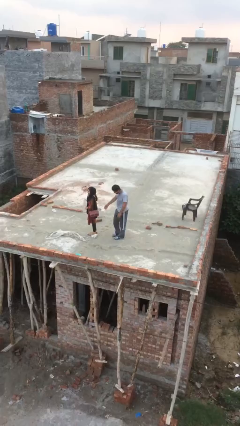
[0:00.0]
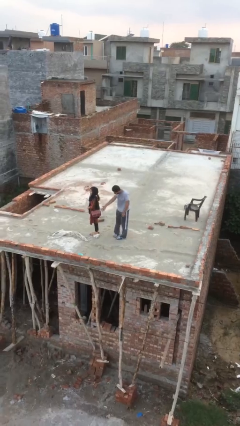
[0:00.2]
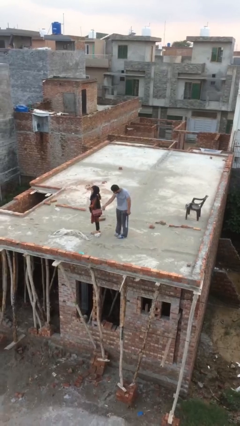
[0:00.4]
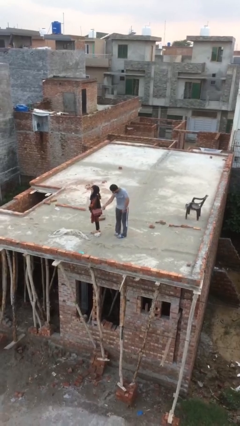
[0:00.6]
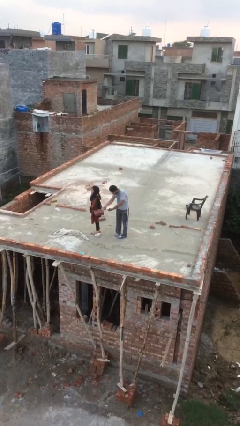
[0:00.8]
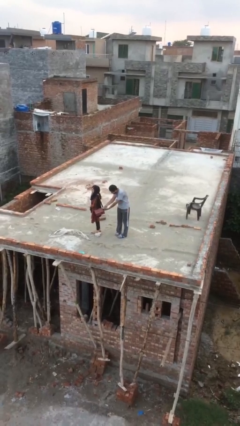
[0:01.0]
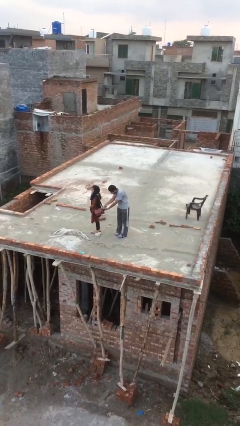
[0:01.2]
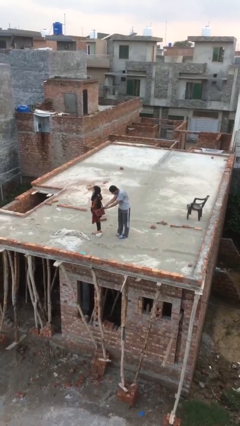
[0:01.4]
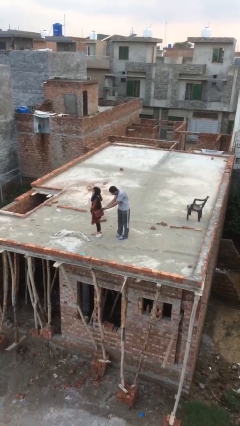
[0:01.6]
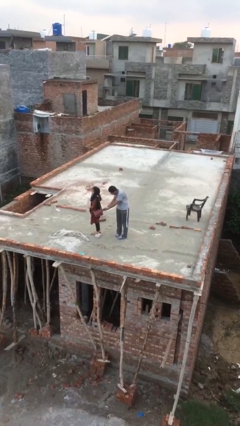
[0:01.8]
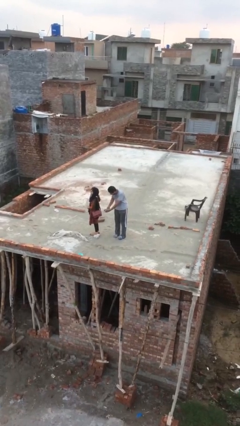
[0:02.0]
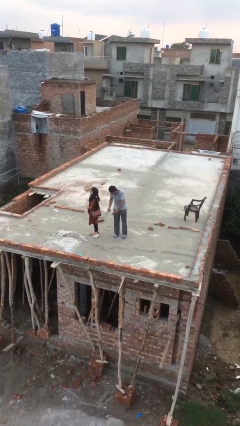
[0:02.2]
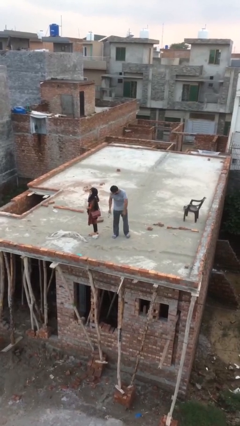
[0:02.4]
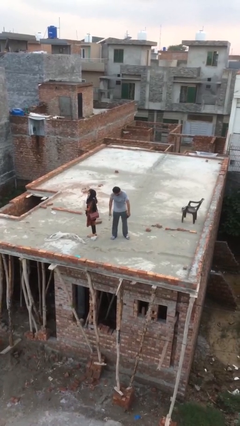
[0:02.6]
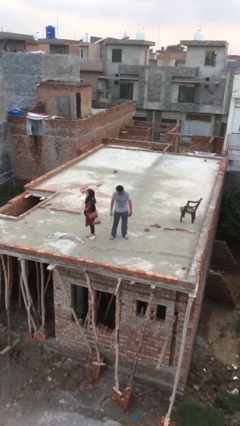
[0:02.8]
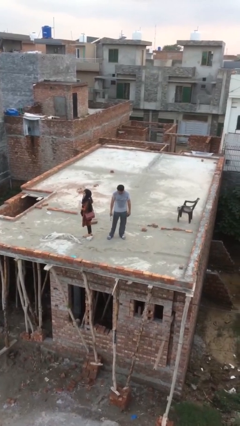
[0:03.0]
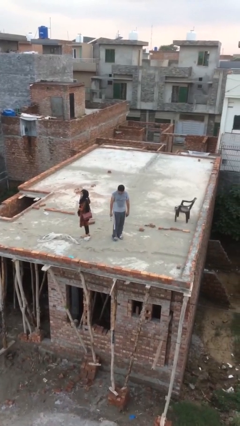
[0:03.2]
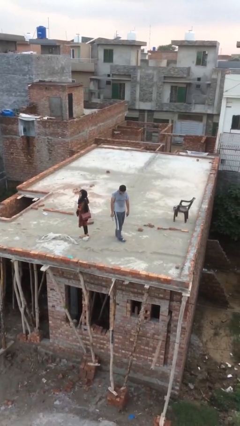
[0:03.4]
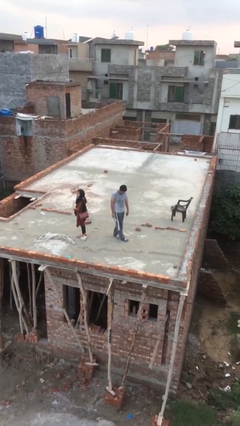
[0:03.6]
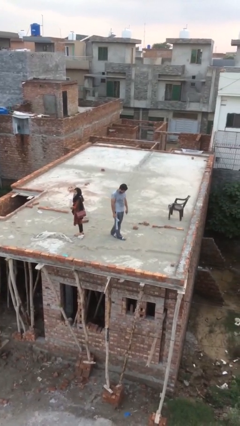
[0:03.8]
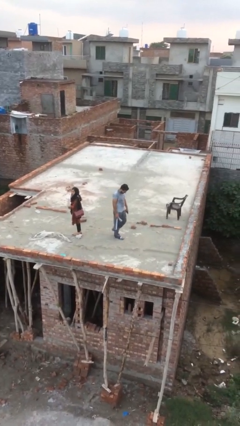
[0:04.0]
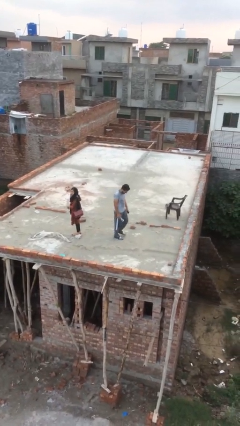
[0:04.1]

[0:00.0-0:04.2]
person steals object from person

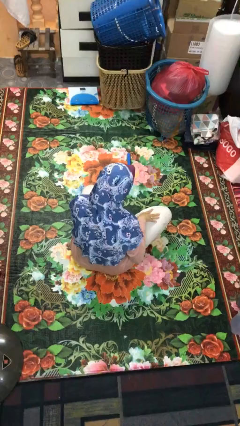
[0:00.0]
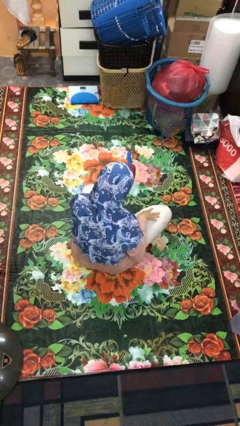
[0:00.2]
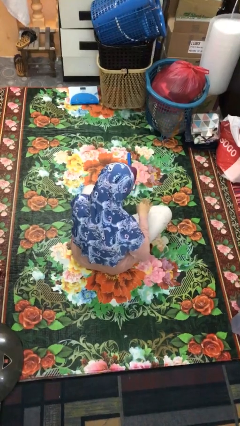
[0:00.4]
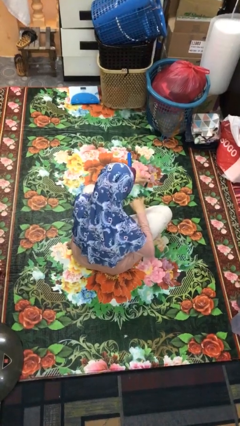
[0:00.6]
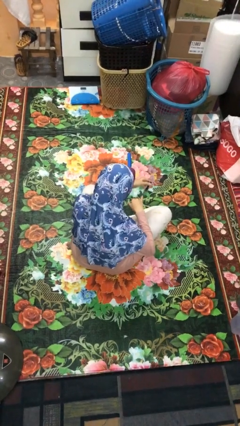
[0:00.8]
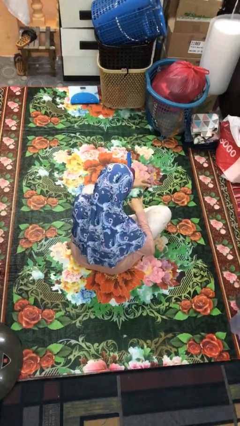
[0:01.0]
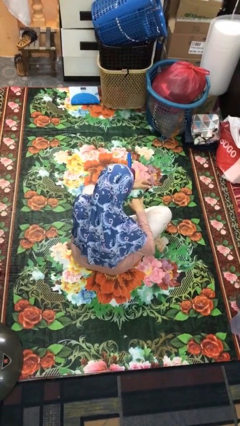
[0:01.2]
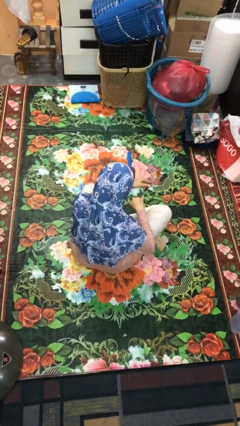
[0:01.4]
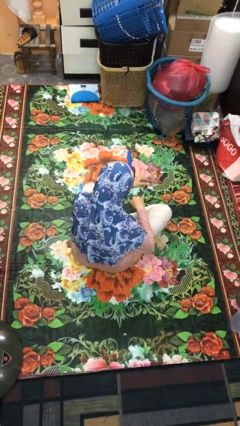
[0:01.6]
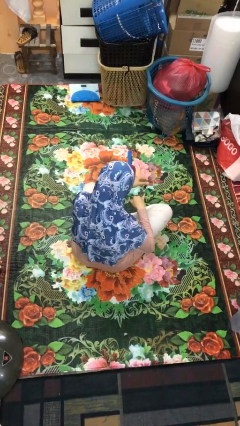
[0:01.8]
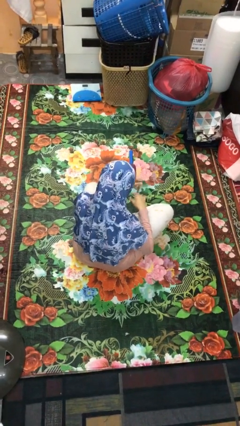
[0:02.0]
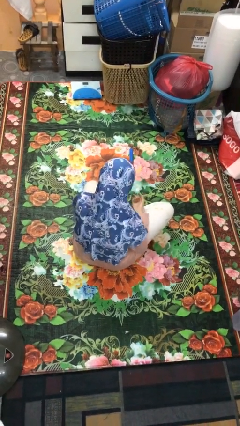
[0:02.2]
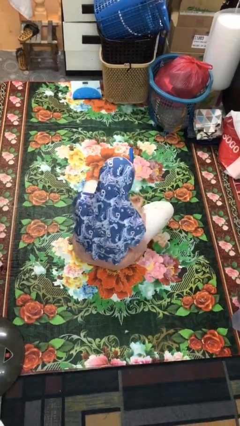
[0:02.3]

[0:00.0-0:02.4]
person clips fingernails

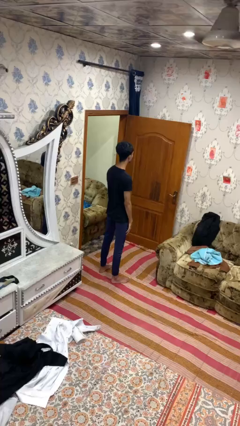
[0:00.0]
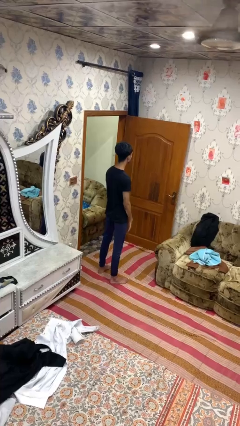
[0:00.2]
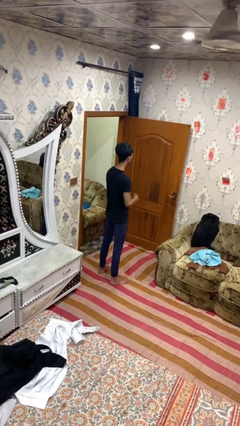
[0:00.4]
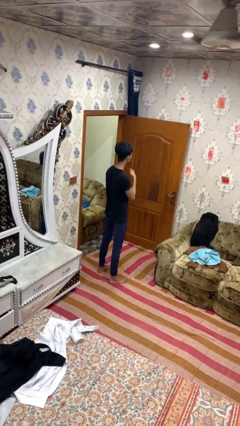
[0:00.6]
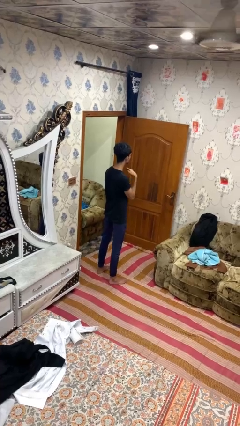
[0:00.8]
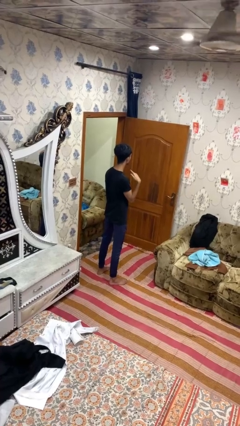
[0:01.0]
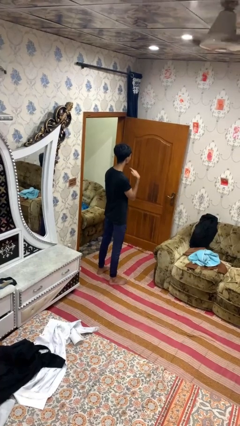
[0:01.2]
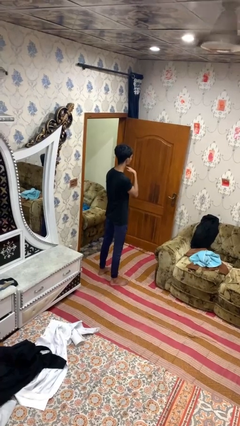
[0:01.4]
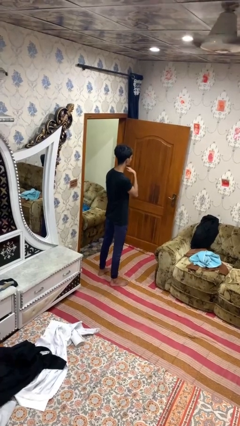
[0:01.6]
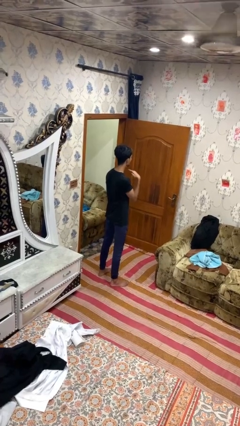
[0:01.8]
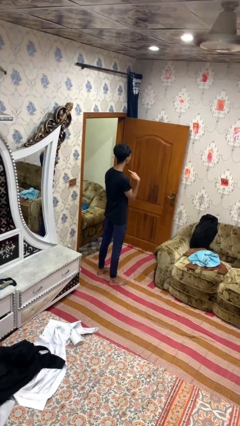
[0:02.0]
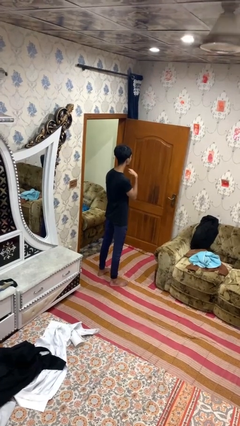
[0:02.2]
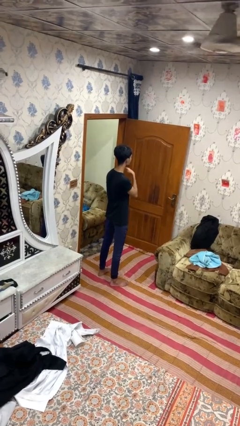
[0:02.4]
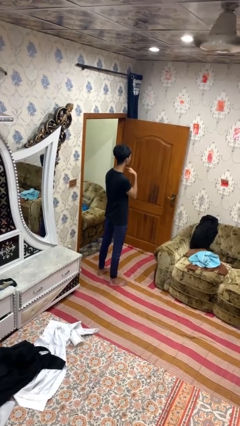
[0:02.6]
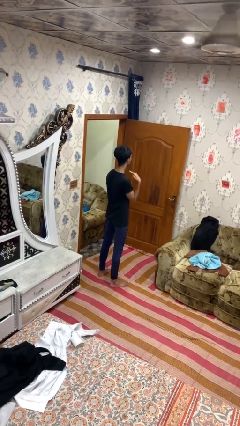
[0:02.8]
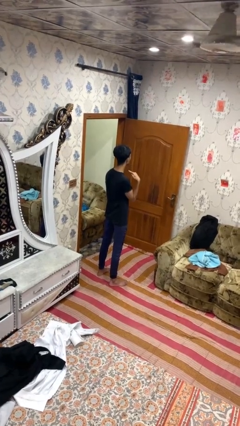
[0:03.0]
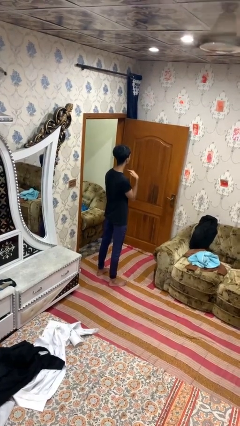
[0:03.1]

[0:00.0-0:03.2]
person gestures cut

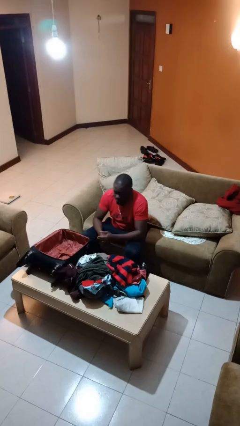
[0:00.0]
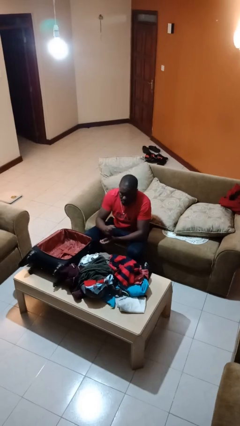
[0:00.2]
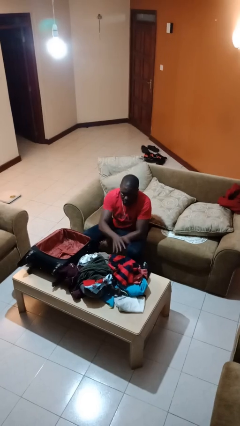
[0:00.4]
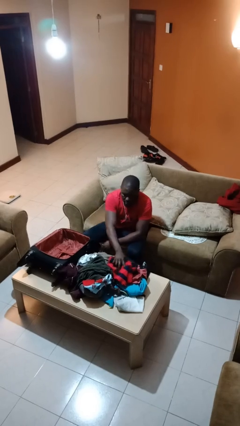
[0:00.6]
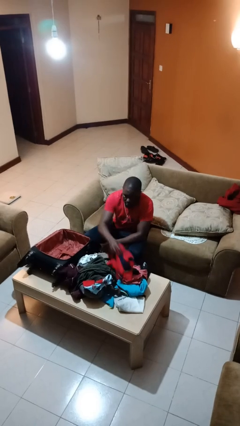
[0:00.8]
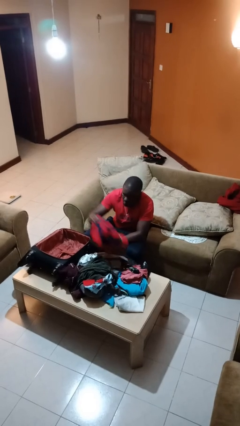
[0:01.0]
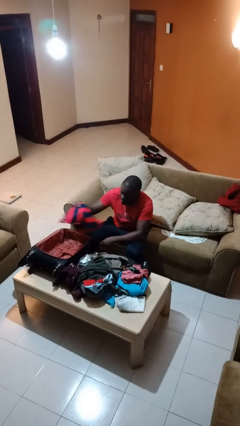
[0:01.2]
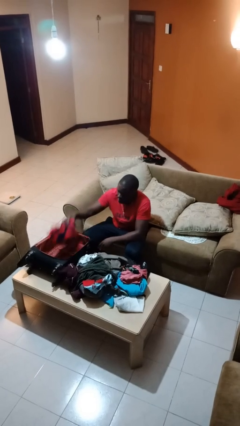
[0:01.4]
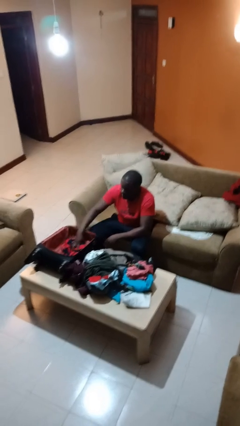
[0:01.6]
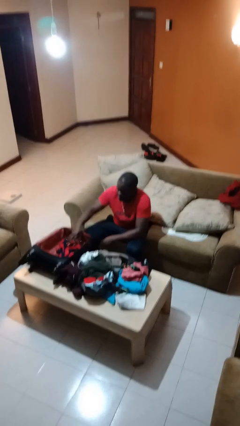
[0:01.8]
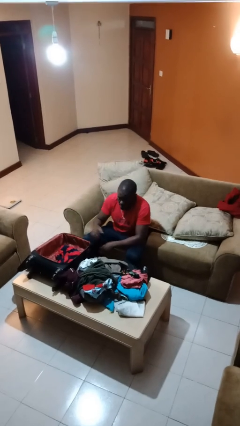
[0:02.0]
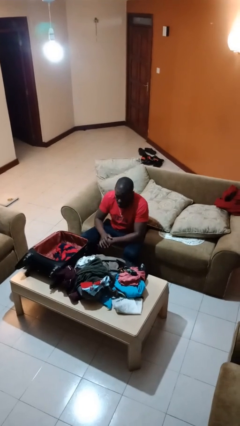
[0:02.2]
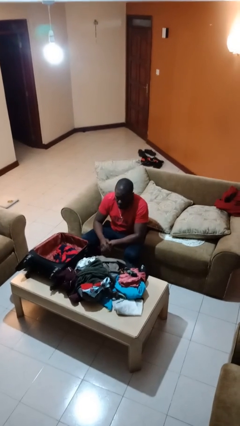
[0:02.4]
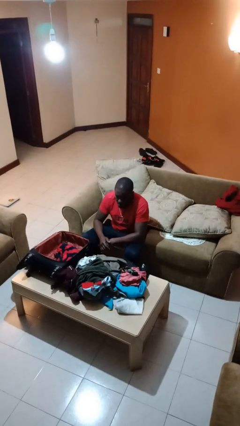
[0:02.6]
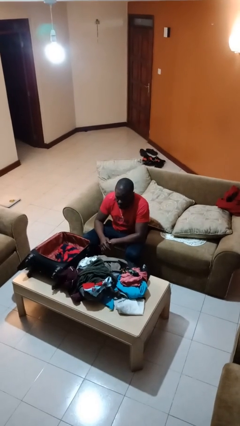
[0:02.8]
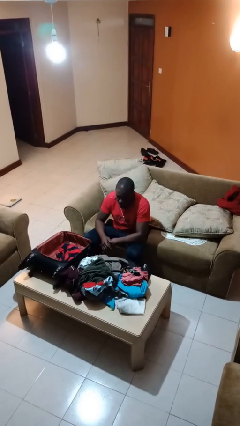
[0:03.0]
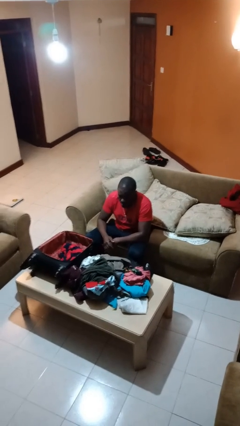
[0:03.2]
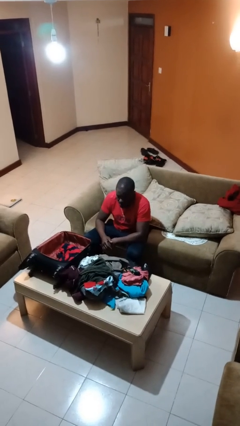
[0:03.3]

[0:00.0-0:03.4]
person loads clothes into suitcase

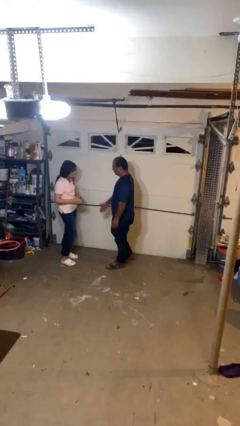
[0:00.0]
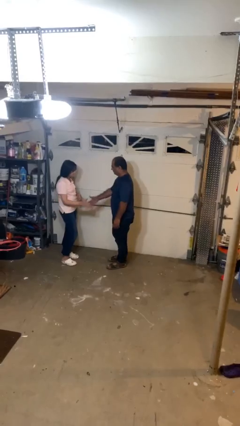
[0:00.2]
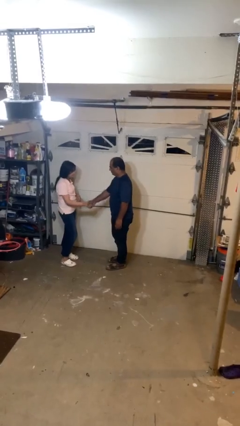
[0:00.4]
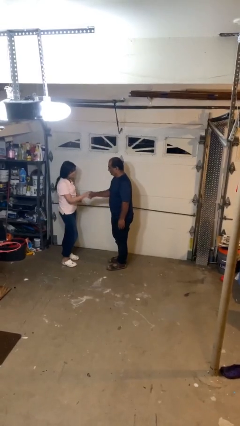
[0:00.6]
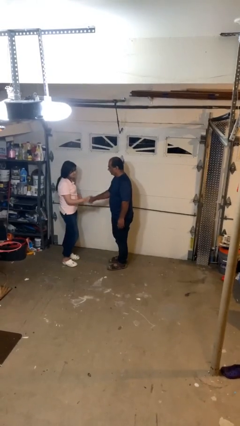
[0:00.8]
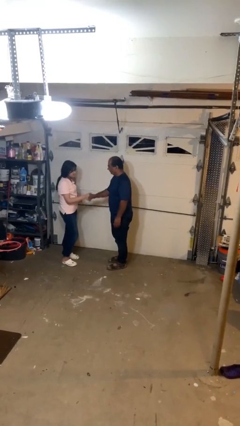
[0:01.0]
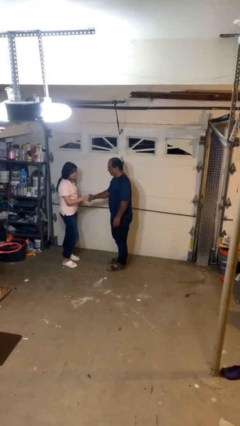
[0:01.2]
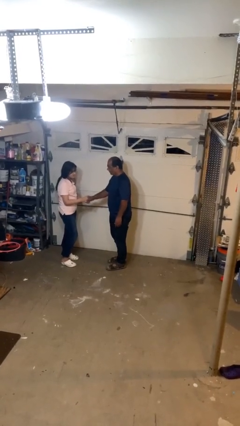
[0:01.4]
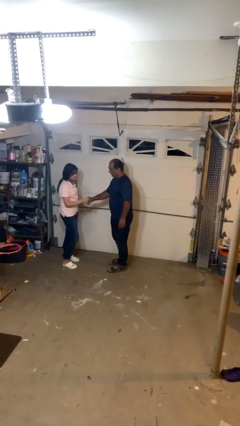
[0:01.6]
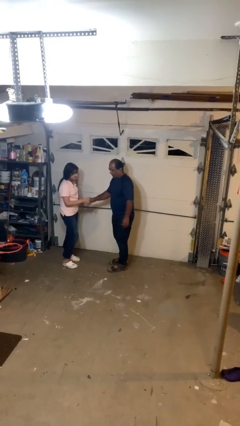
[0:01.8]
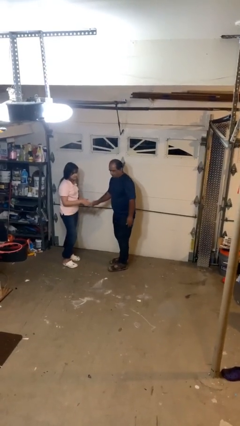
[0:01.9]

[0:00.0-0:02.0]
person shakes hand

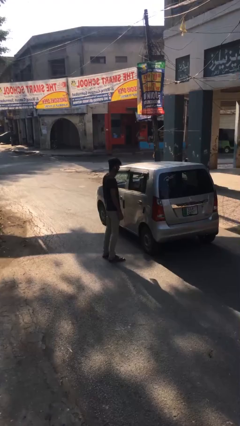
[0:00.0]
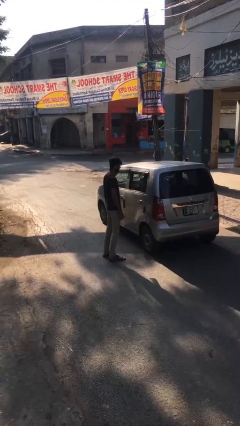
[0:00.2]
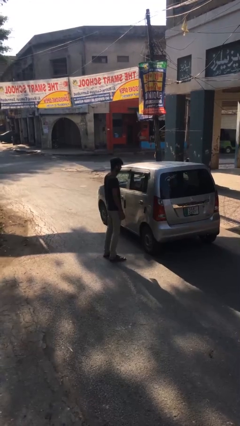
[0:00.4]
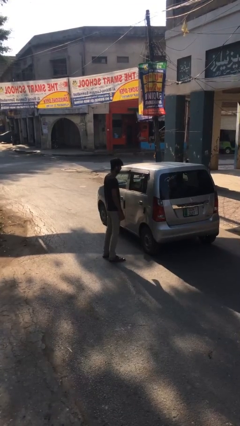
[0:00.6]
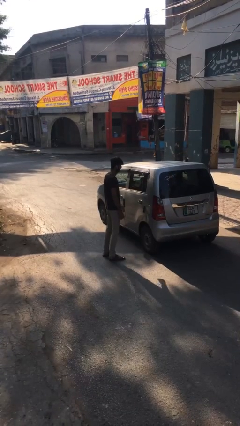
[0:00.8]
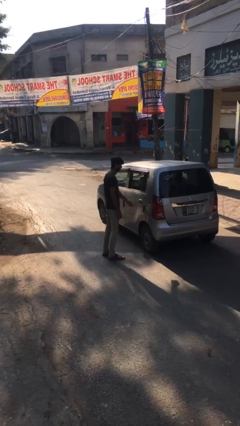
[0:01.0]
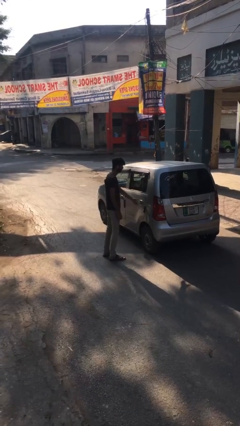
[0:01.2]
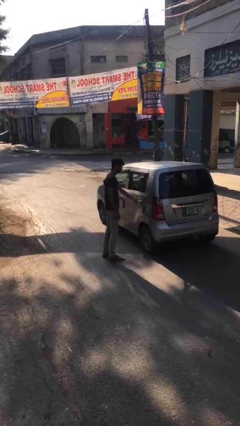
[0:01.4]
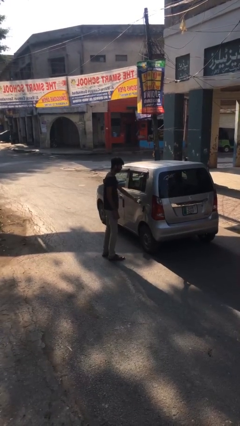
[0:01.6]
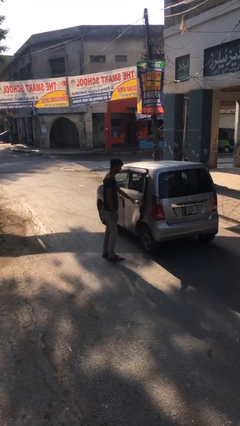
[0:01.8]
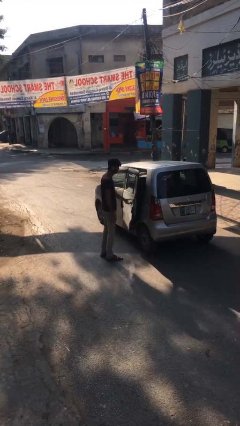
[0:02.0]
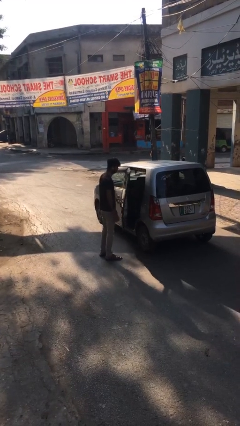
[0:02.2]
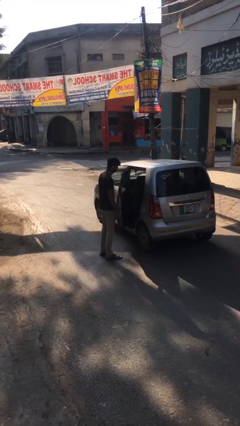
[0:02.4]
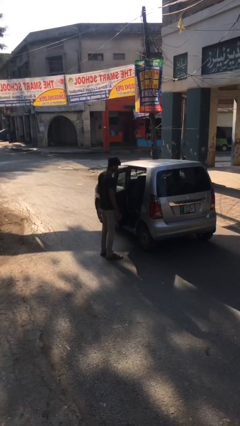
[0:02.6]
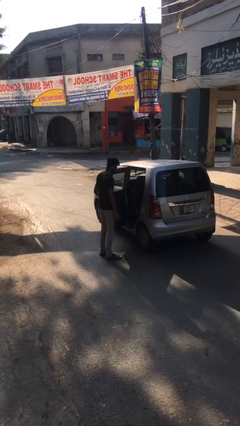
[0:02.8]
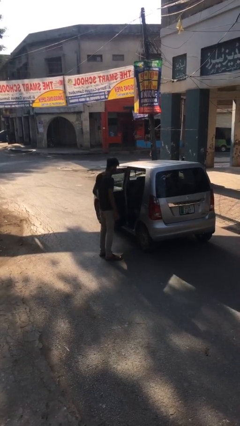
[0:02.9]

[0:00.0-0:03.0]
person opens car door
